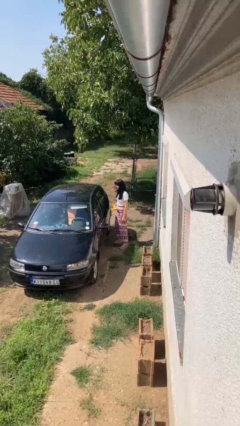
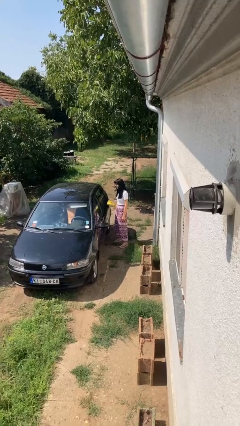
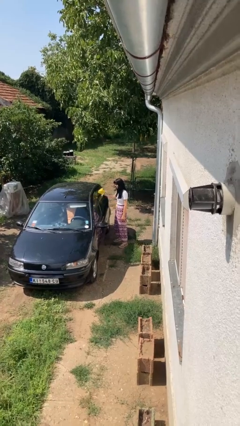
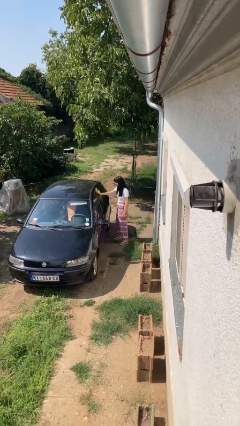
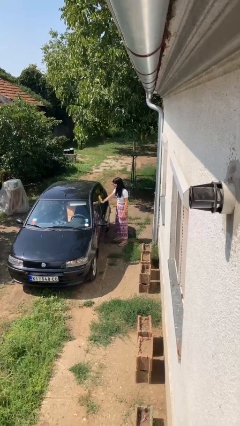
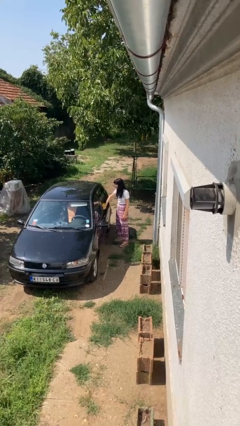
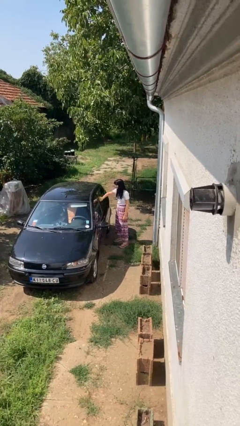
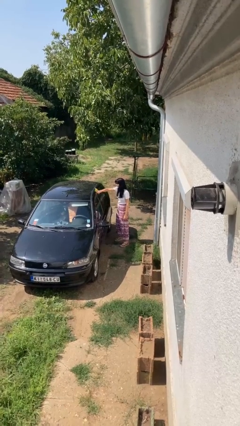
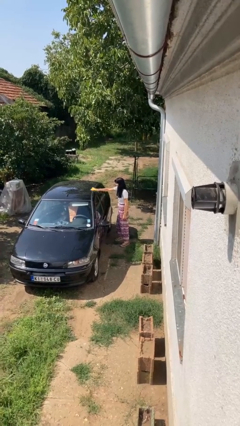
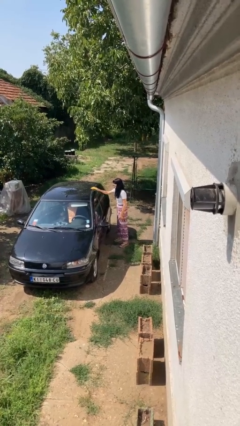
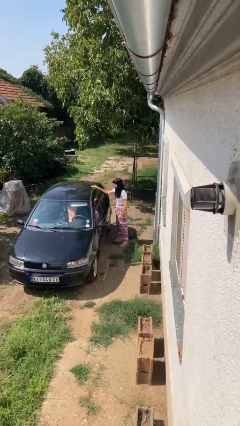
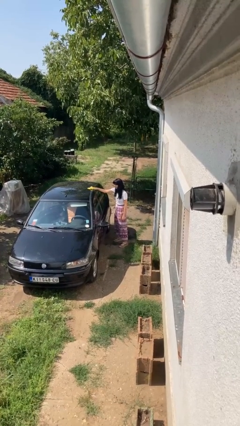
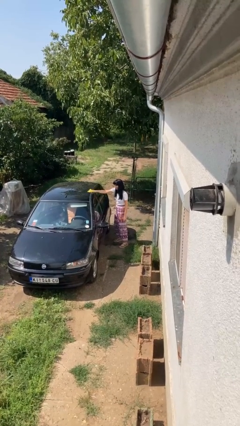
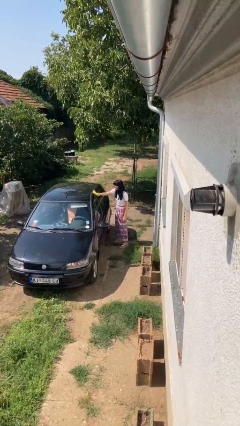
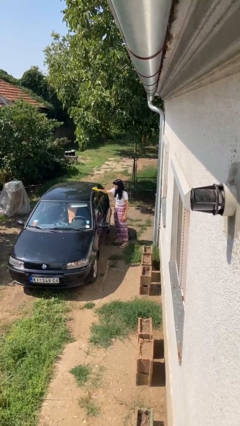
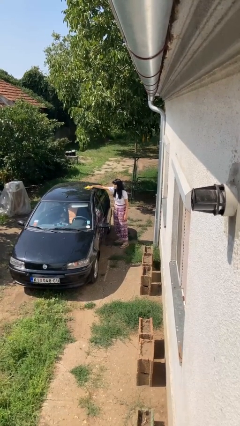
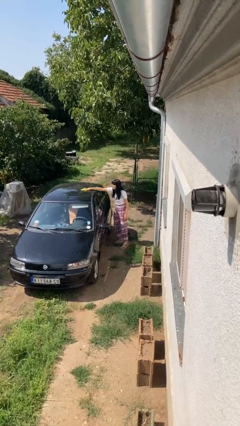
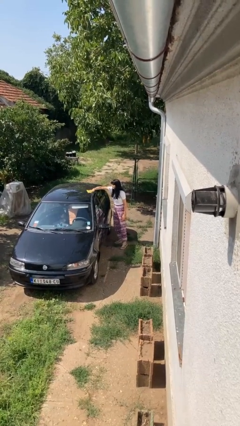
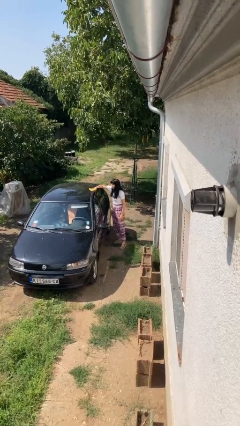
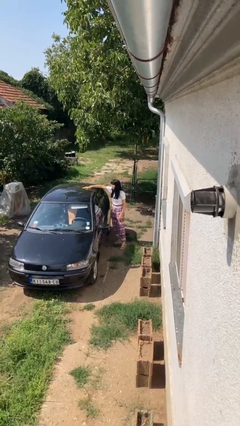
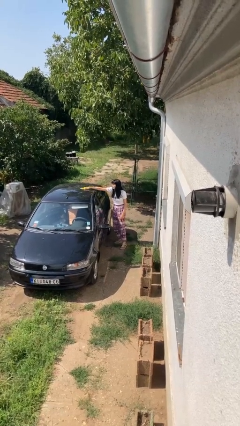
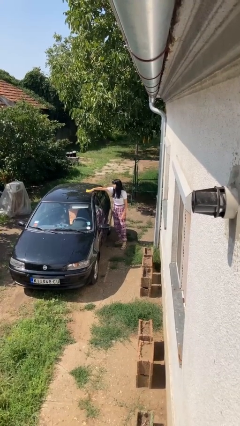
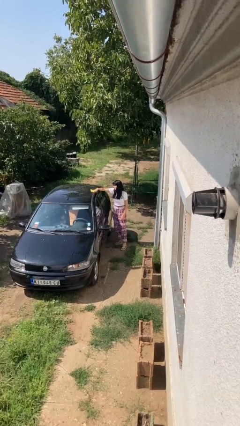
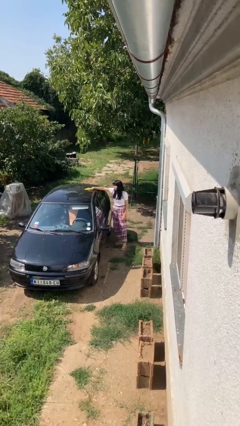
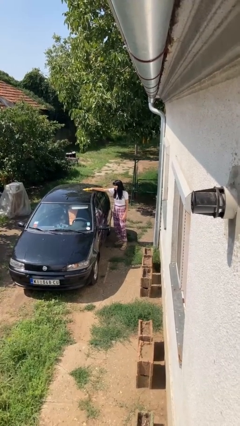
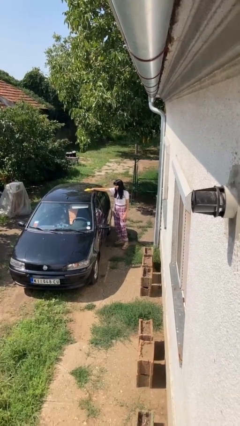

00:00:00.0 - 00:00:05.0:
person polishes car with rag

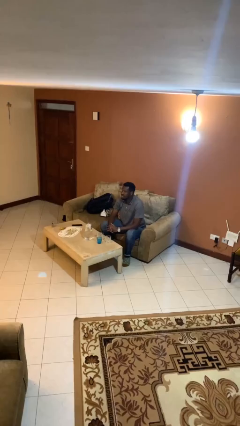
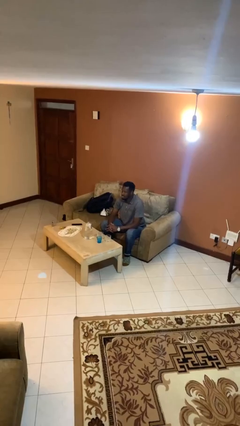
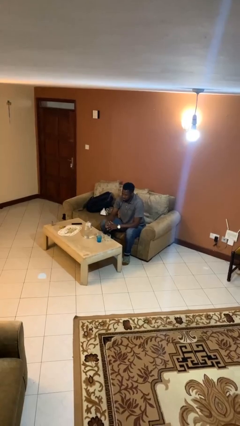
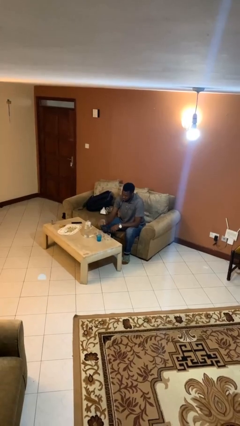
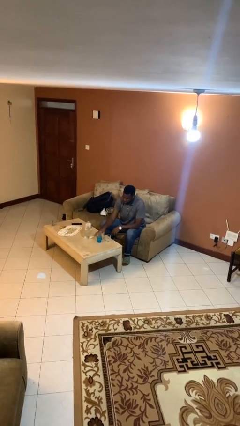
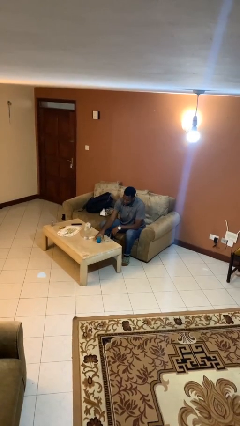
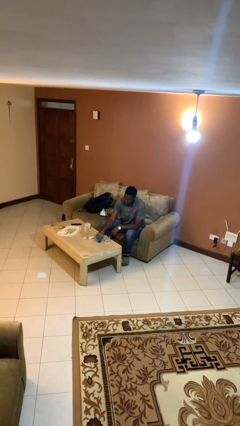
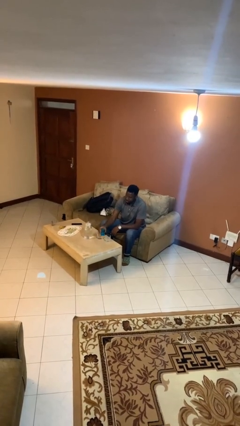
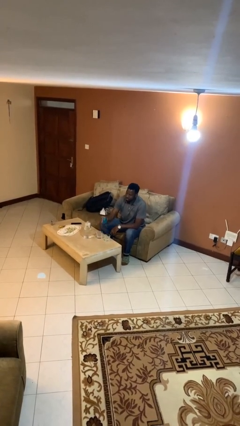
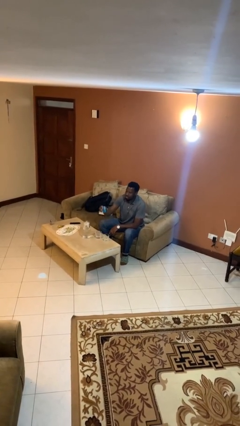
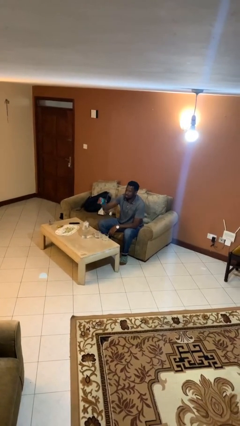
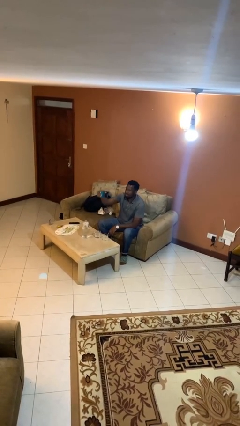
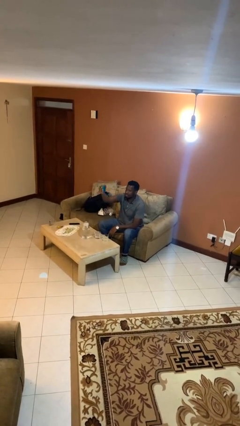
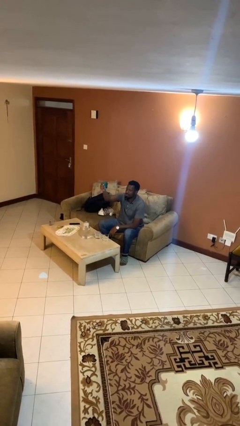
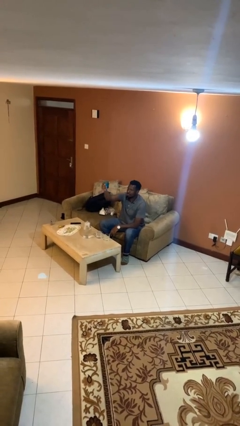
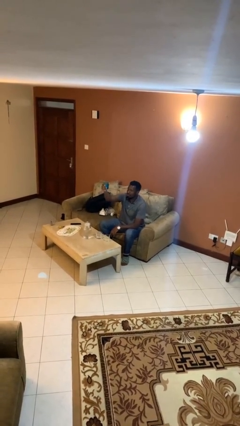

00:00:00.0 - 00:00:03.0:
person picks up object from table

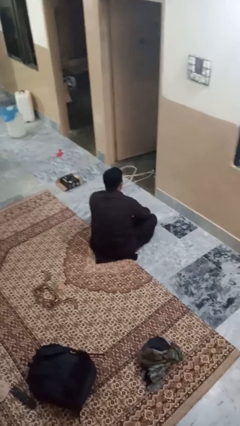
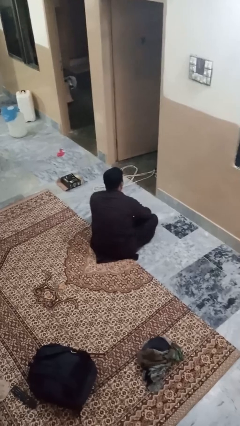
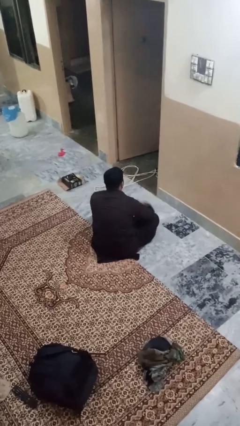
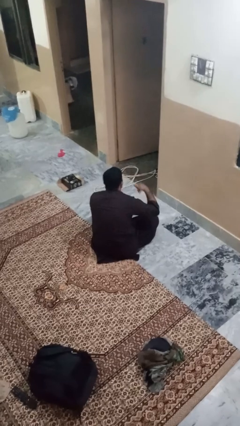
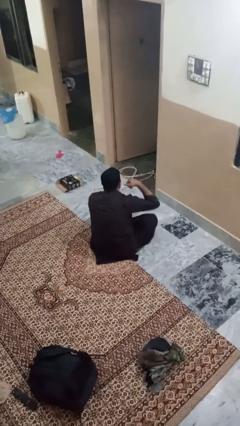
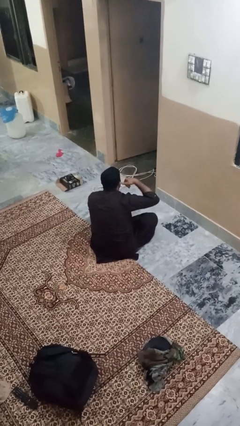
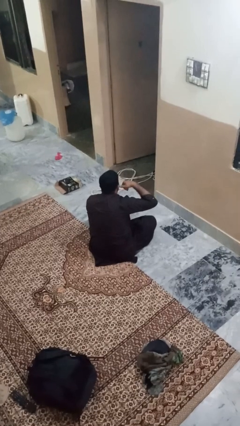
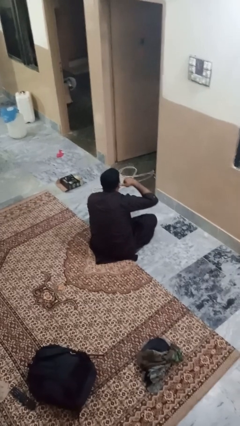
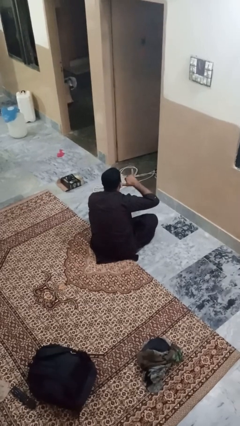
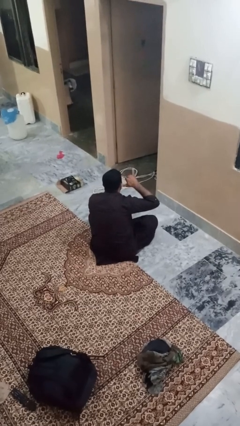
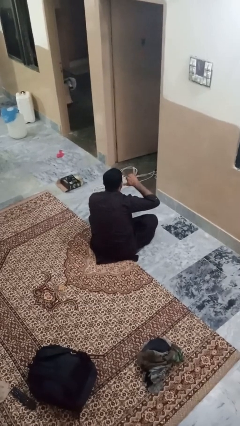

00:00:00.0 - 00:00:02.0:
person gestures call me

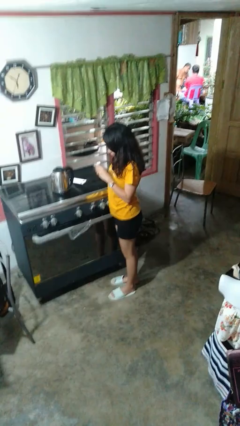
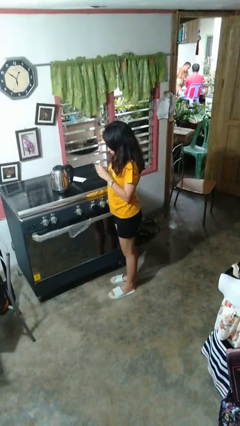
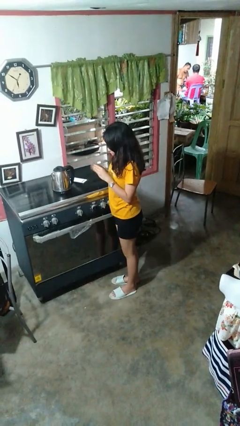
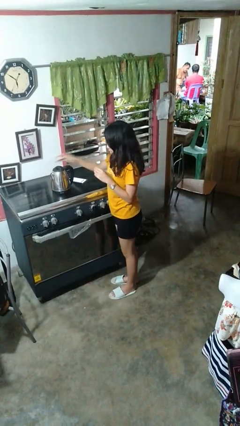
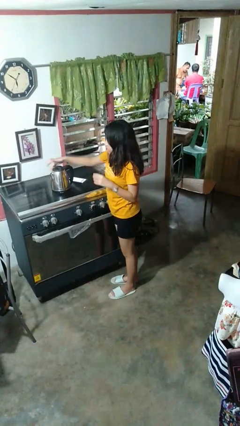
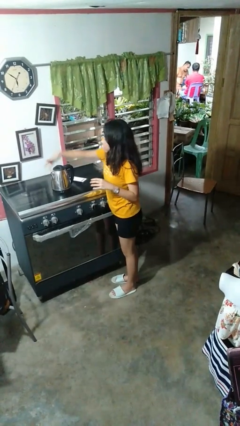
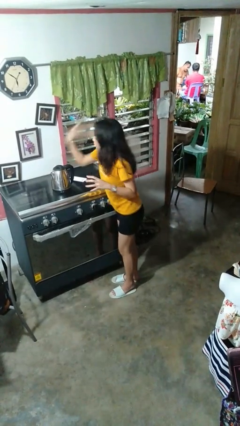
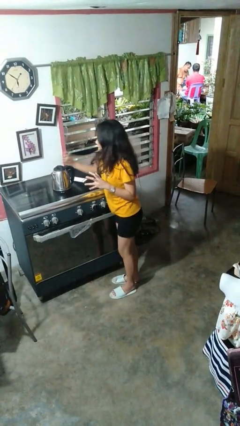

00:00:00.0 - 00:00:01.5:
person burns hand

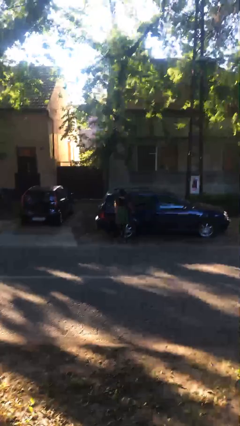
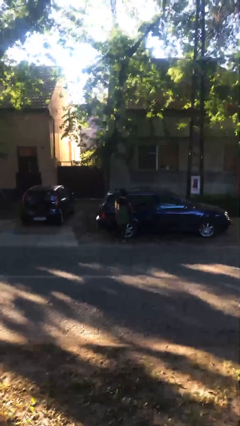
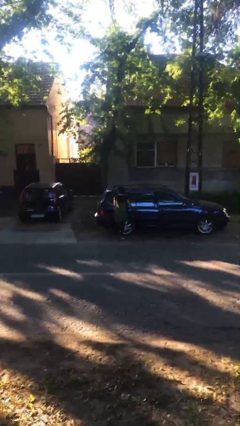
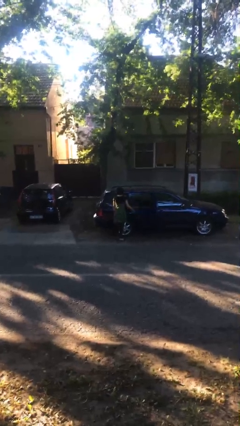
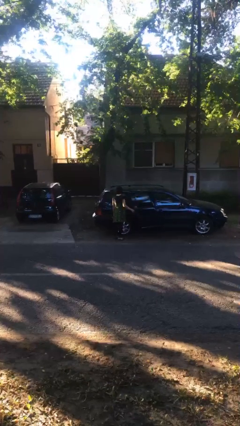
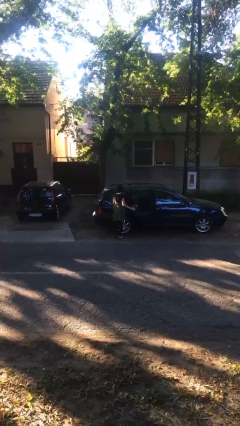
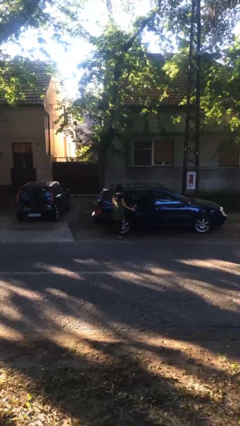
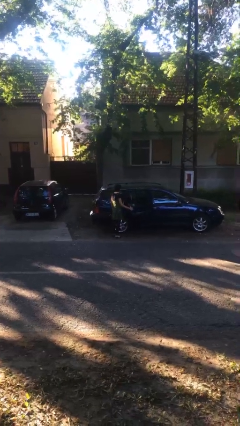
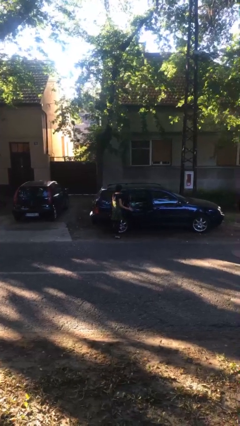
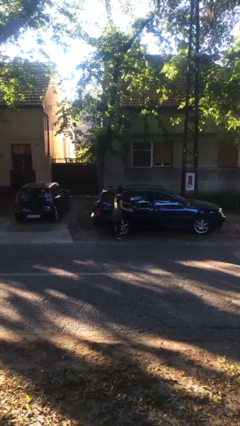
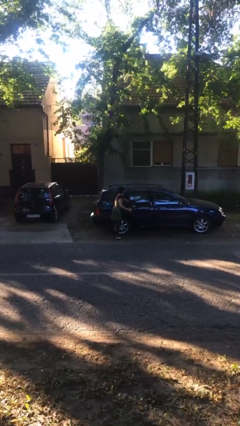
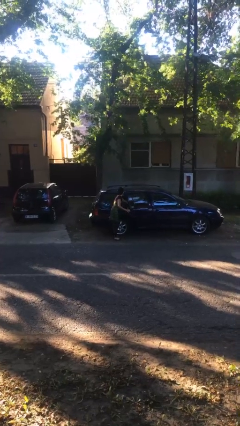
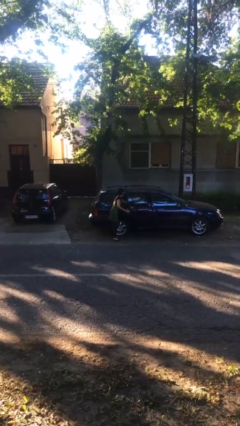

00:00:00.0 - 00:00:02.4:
person opens car door

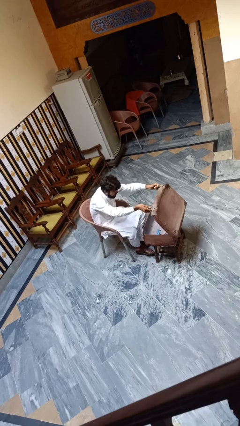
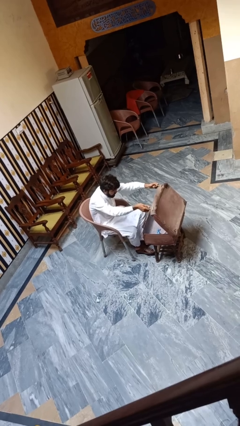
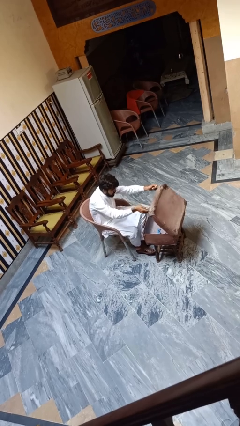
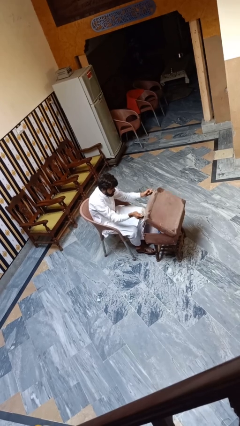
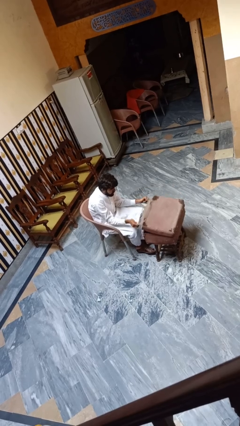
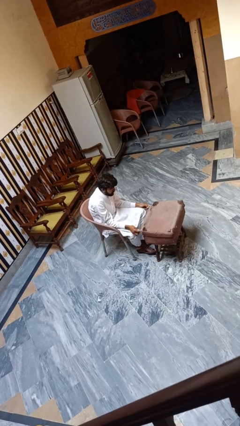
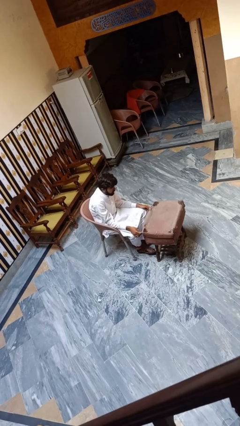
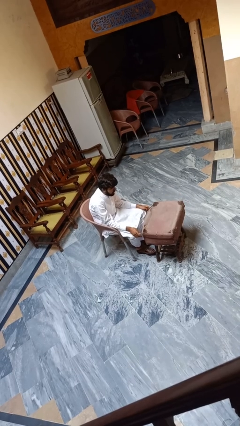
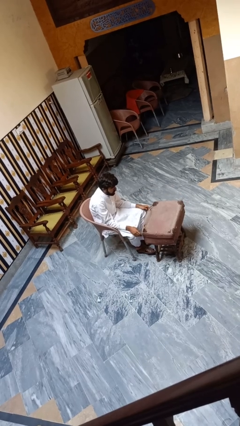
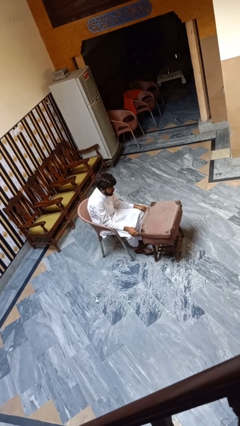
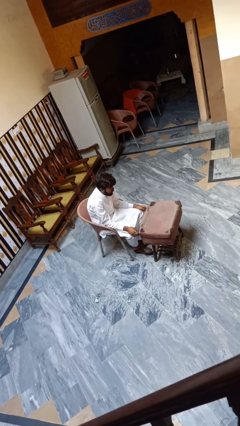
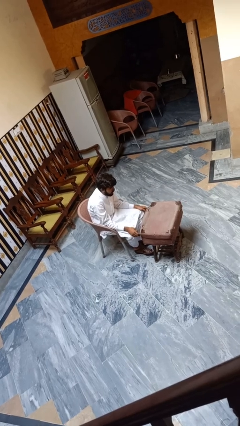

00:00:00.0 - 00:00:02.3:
person closes suitcase

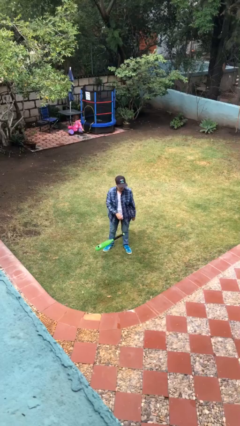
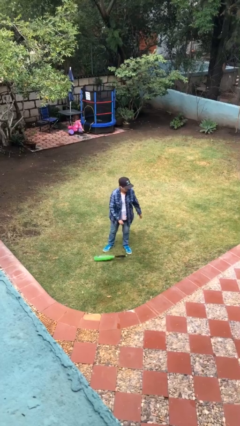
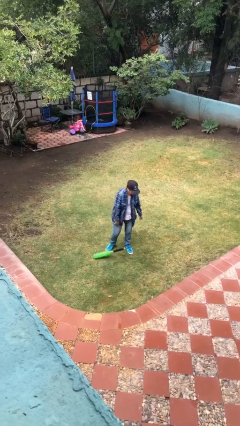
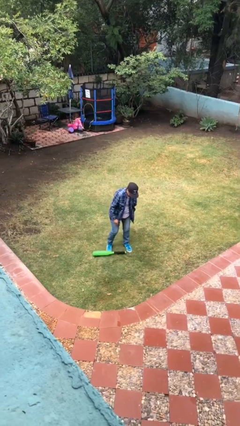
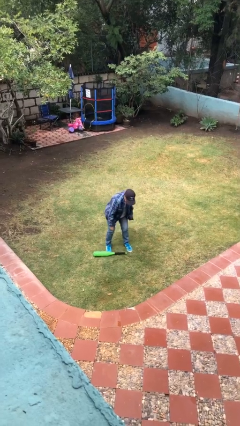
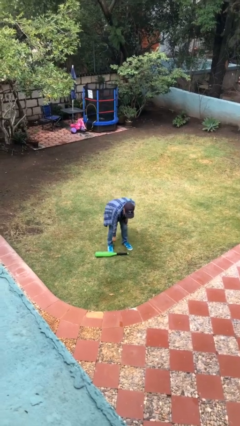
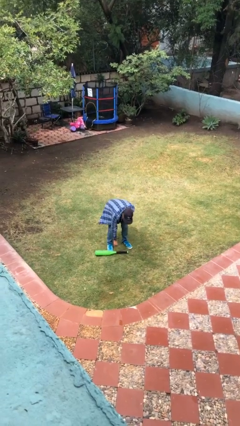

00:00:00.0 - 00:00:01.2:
person drops object
